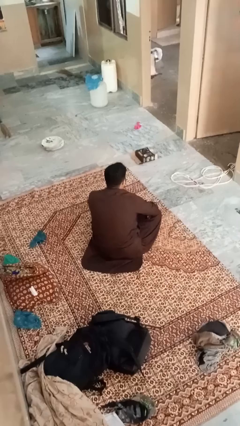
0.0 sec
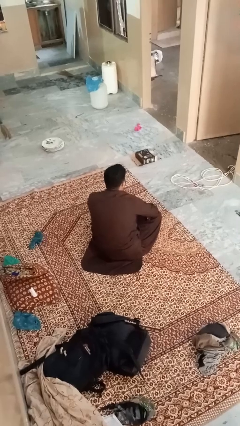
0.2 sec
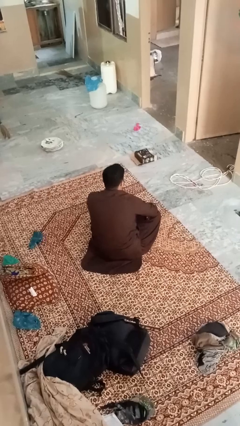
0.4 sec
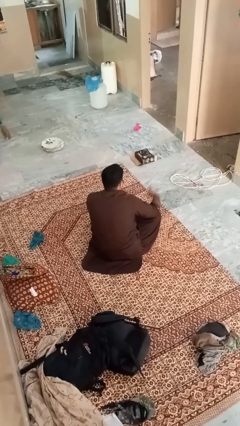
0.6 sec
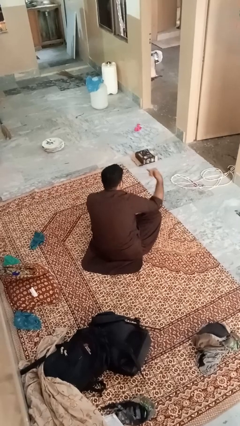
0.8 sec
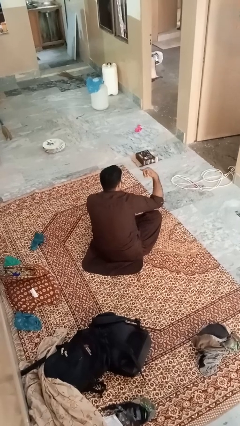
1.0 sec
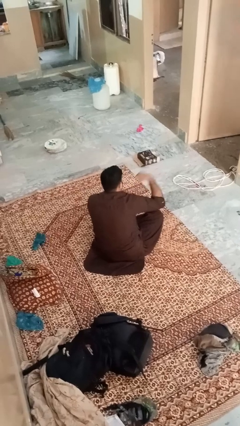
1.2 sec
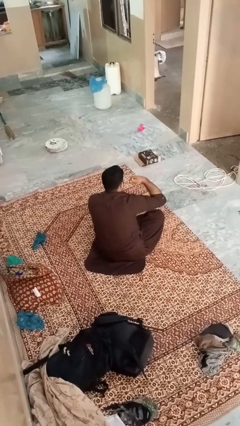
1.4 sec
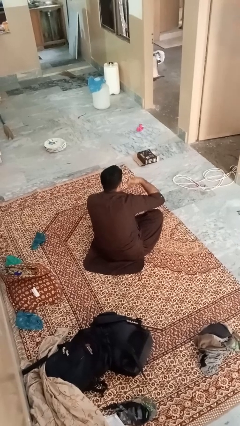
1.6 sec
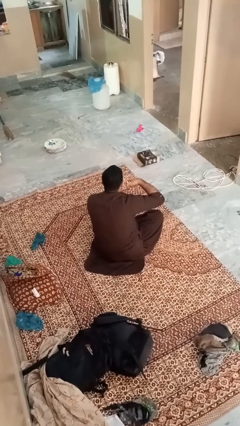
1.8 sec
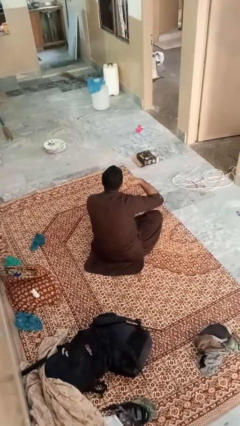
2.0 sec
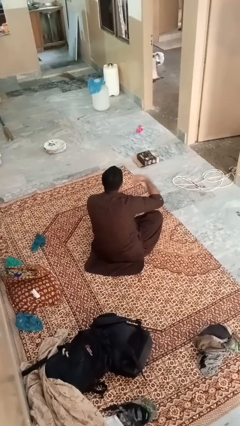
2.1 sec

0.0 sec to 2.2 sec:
person gestures call me

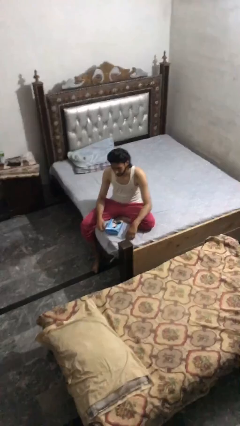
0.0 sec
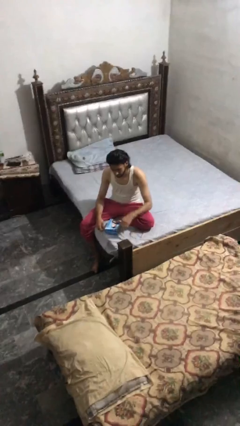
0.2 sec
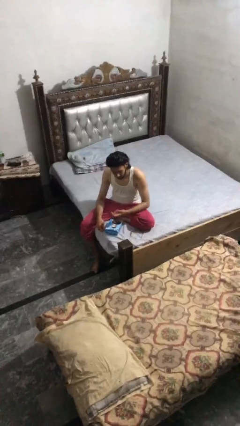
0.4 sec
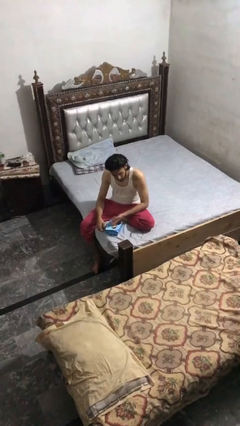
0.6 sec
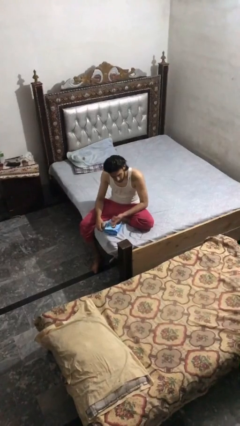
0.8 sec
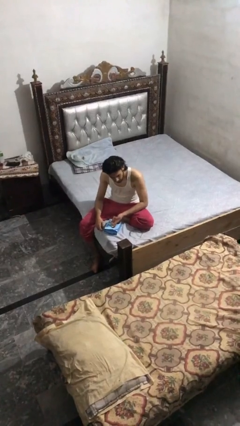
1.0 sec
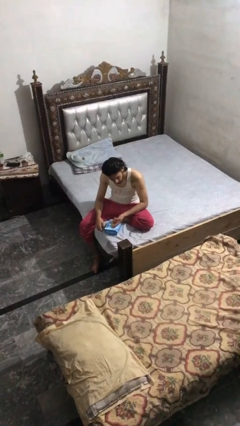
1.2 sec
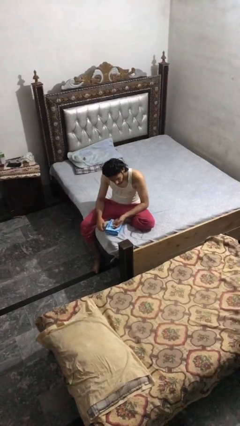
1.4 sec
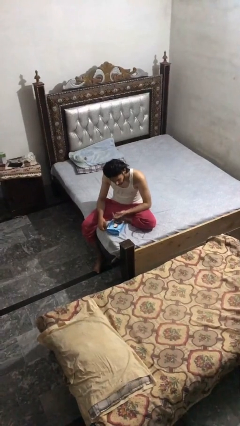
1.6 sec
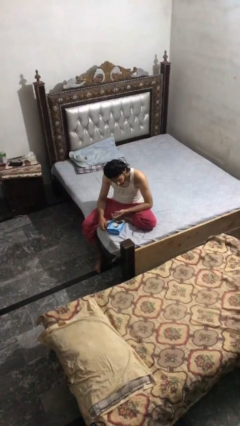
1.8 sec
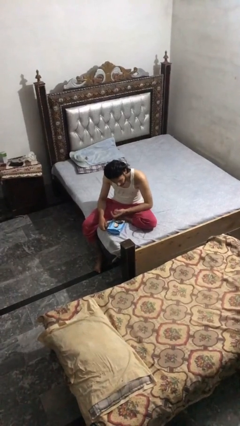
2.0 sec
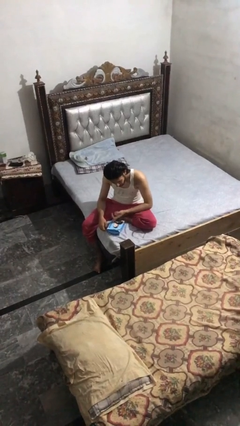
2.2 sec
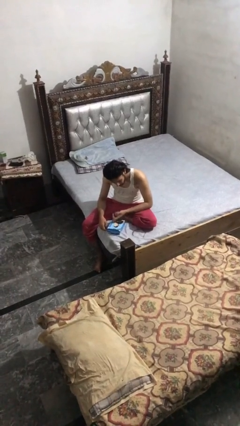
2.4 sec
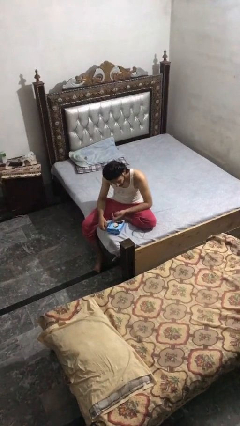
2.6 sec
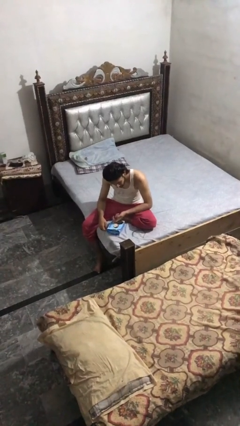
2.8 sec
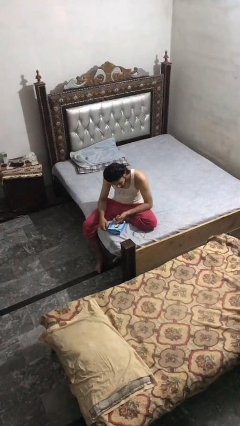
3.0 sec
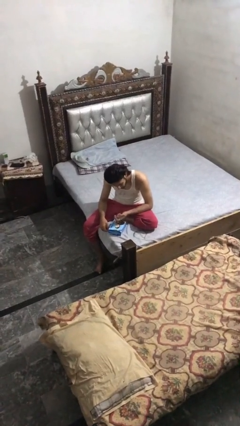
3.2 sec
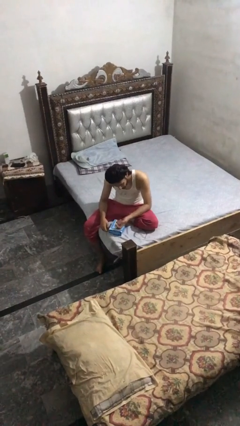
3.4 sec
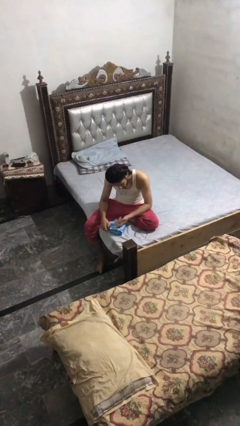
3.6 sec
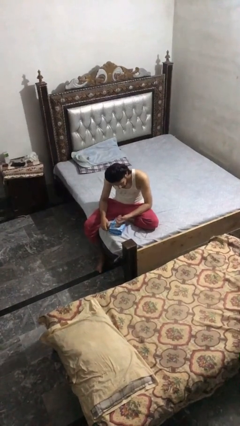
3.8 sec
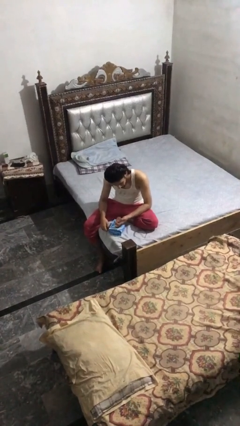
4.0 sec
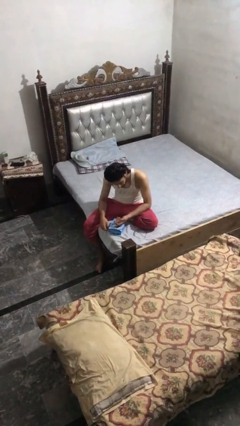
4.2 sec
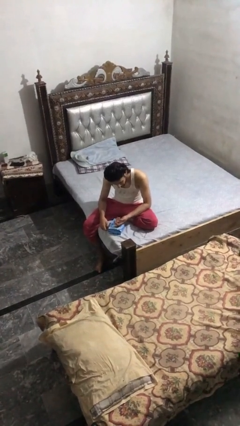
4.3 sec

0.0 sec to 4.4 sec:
person taps object with finger

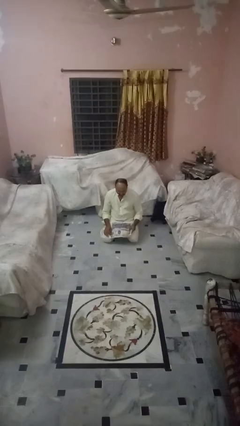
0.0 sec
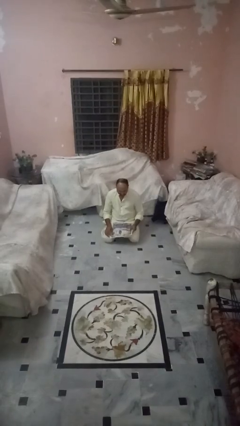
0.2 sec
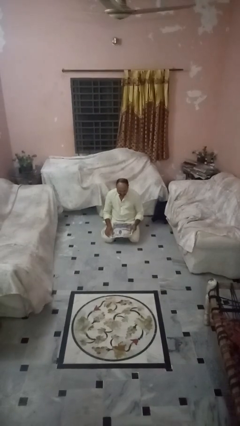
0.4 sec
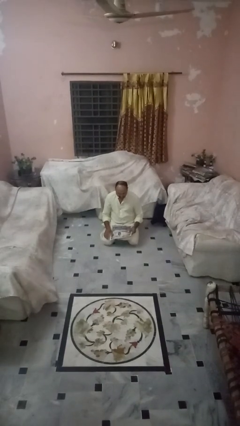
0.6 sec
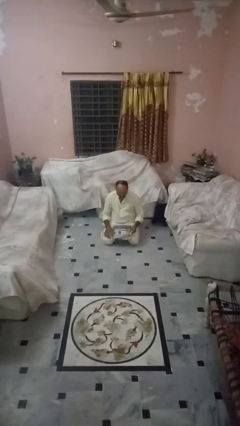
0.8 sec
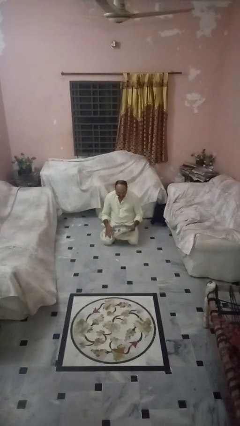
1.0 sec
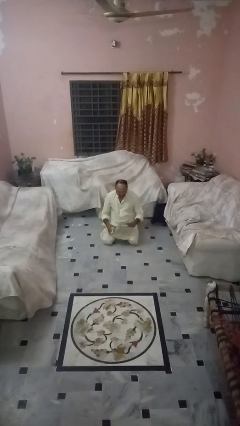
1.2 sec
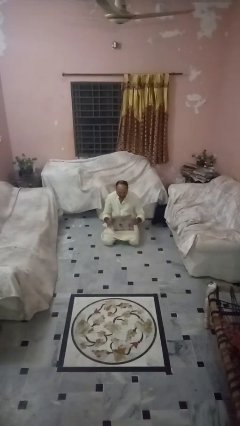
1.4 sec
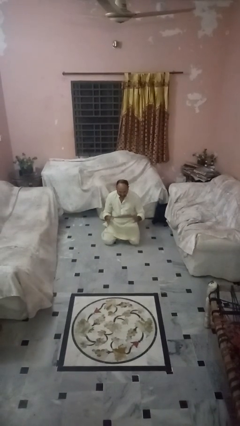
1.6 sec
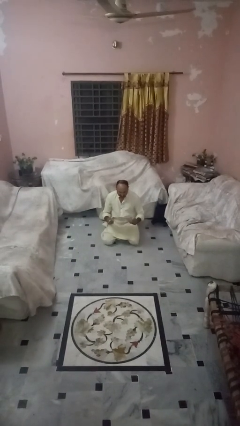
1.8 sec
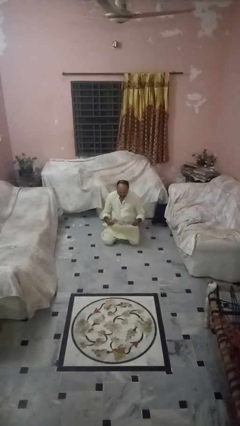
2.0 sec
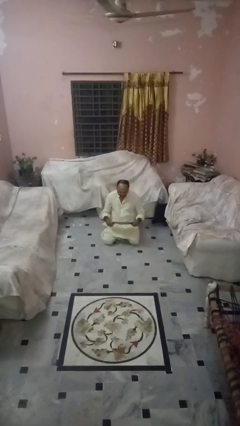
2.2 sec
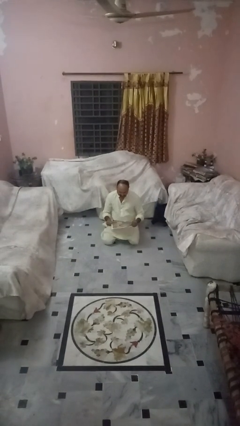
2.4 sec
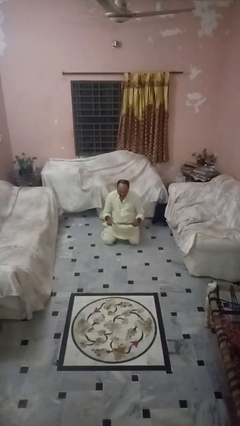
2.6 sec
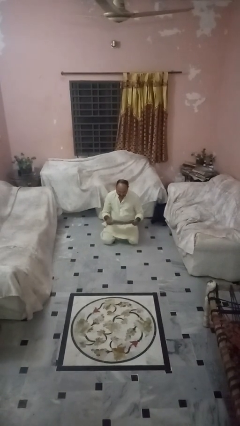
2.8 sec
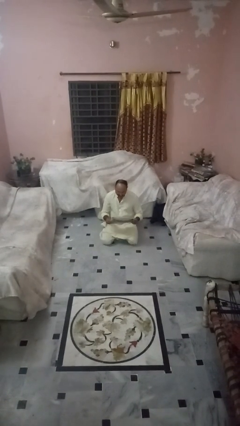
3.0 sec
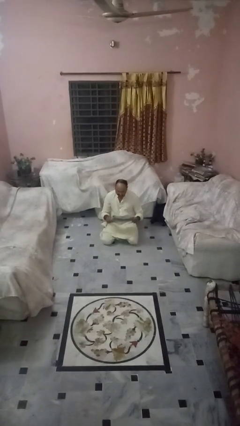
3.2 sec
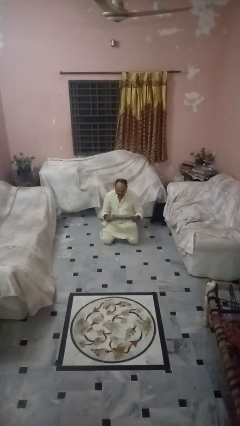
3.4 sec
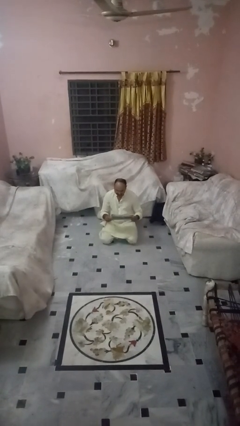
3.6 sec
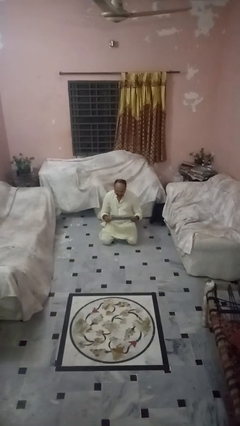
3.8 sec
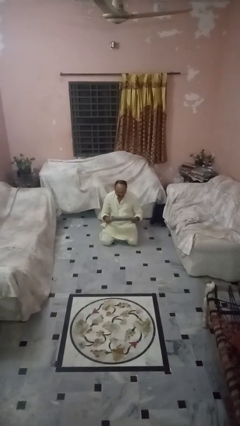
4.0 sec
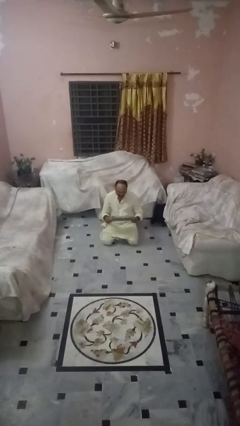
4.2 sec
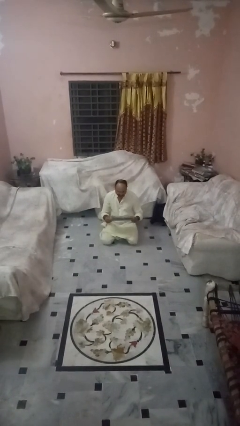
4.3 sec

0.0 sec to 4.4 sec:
person reads newspaper

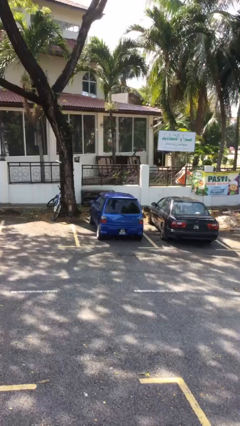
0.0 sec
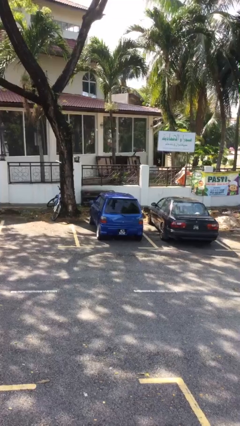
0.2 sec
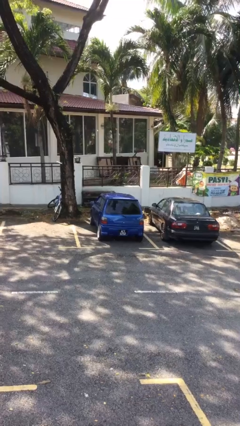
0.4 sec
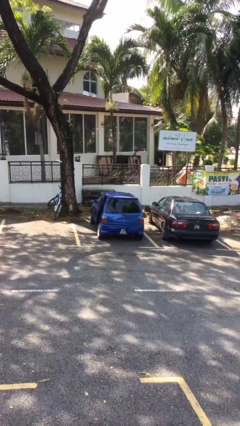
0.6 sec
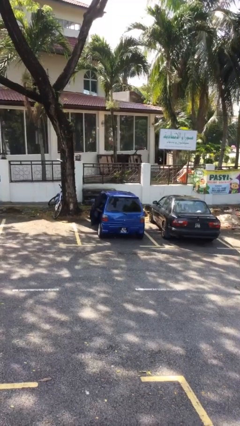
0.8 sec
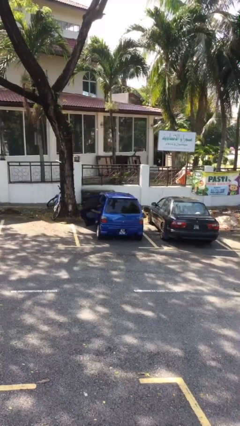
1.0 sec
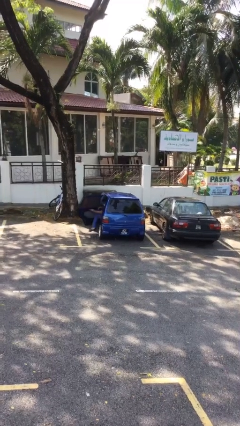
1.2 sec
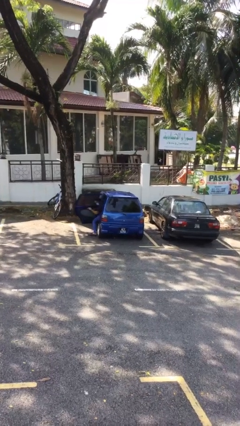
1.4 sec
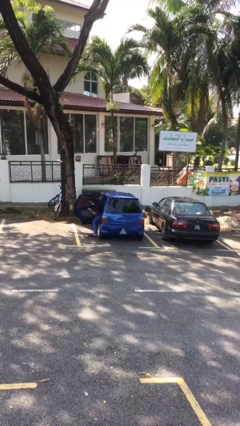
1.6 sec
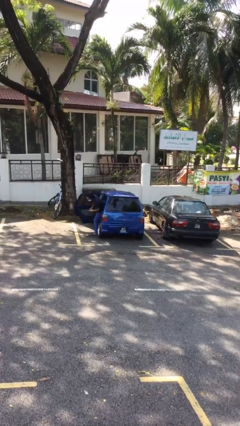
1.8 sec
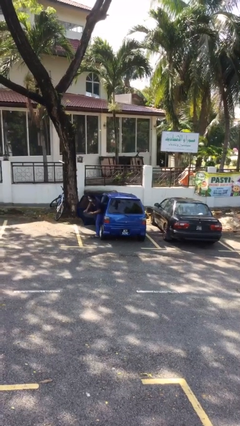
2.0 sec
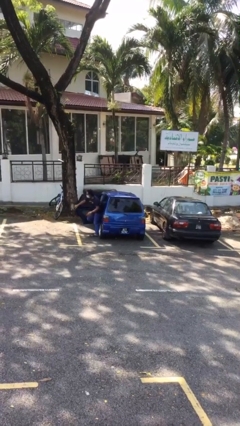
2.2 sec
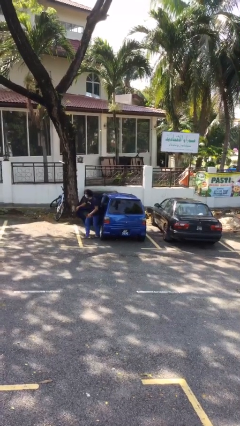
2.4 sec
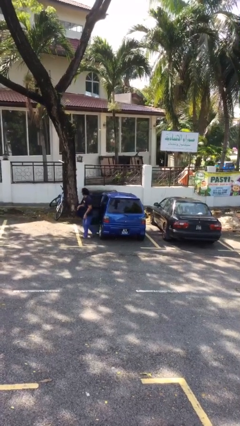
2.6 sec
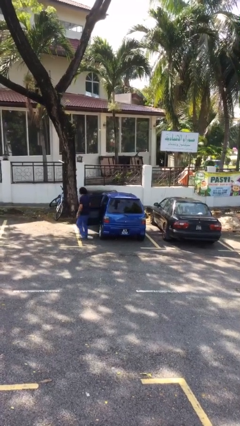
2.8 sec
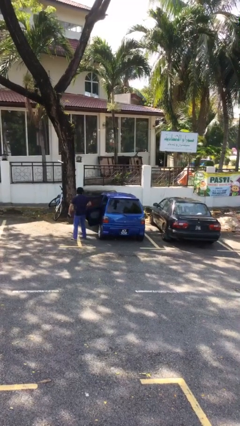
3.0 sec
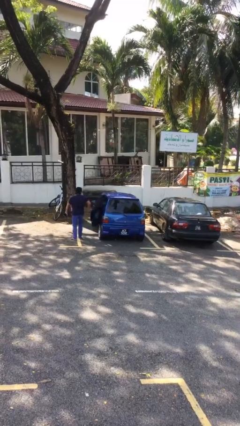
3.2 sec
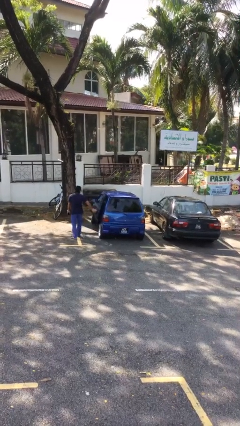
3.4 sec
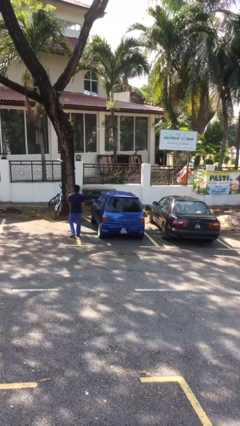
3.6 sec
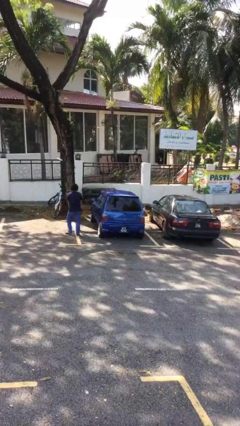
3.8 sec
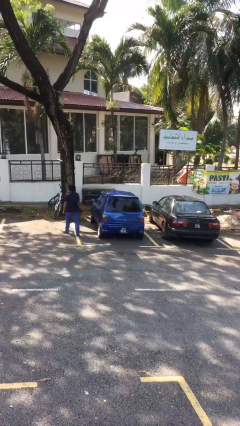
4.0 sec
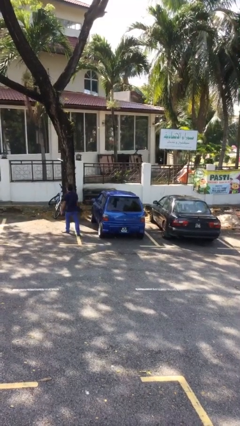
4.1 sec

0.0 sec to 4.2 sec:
car drops off person

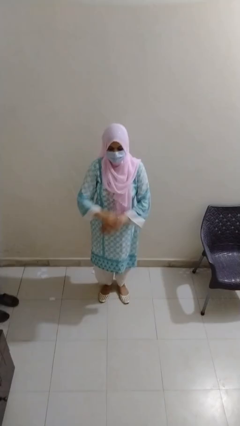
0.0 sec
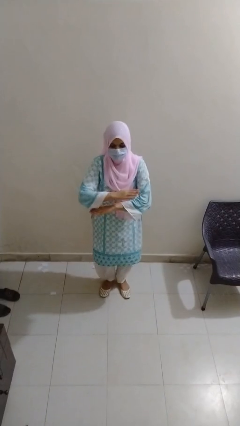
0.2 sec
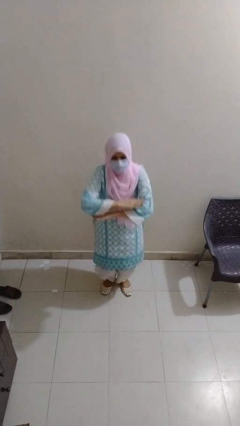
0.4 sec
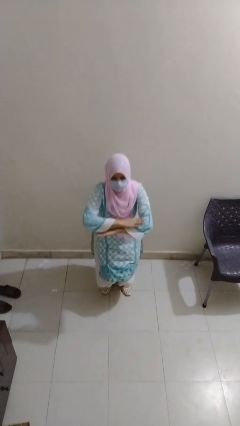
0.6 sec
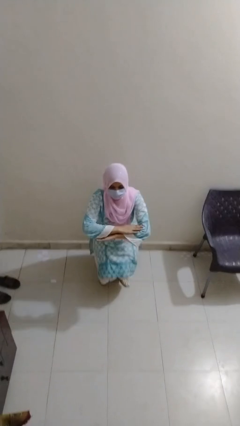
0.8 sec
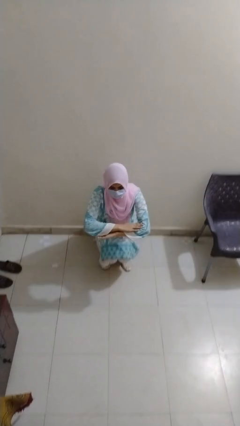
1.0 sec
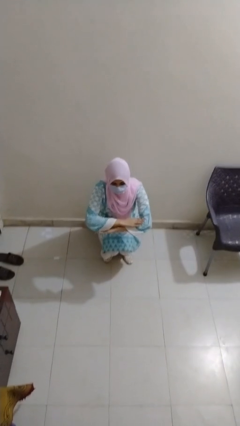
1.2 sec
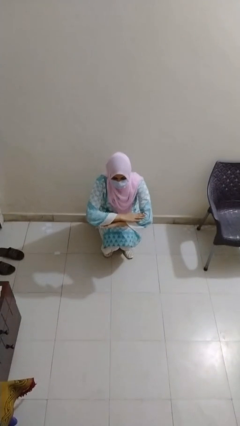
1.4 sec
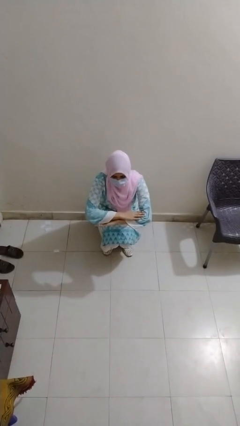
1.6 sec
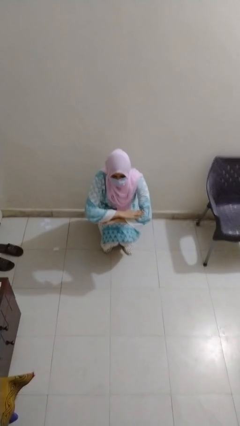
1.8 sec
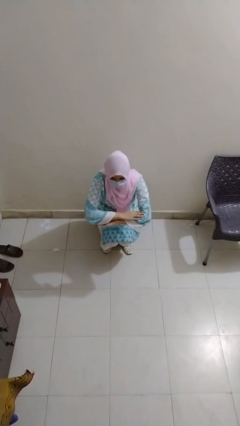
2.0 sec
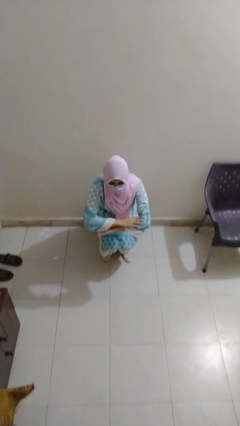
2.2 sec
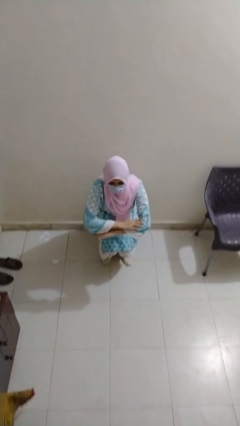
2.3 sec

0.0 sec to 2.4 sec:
person squats
